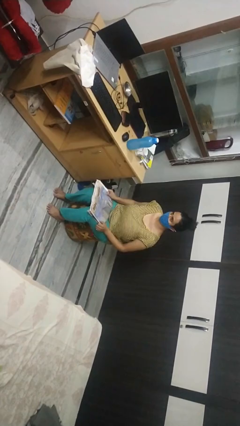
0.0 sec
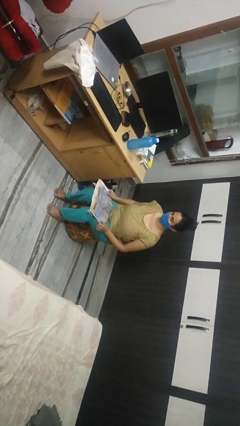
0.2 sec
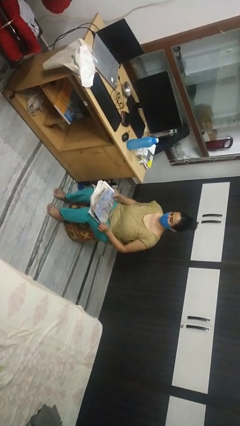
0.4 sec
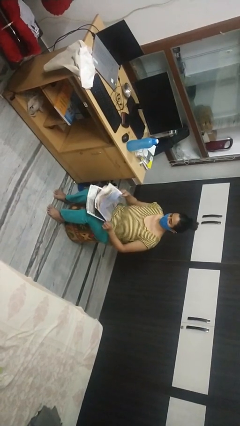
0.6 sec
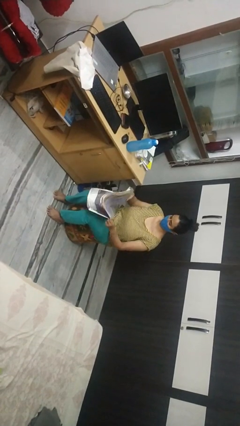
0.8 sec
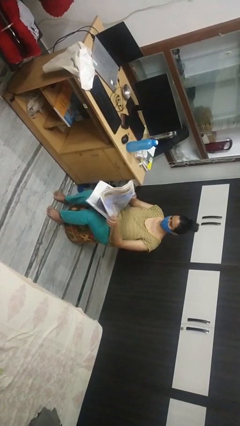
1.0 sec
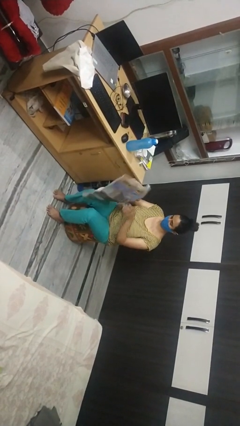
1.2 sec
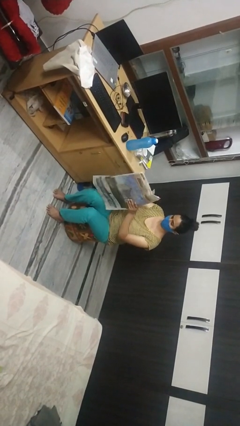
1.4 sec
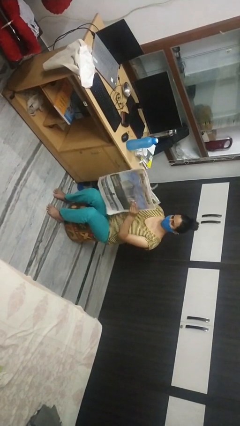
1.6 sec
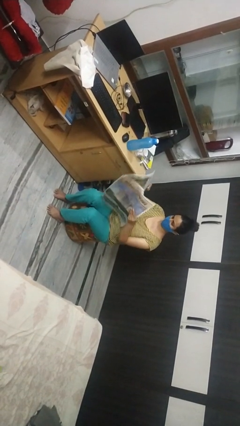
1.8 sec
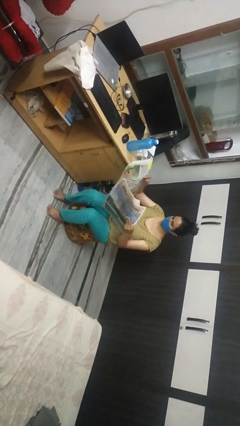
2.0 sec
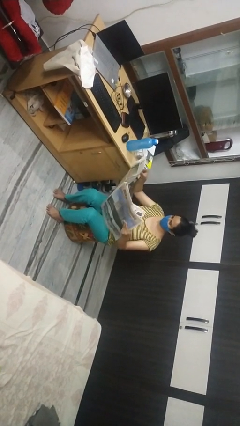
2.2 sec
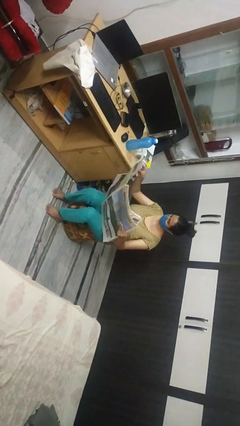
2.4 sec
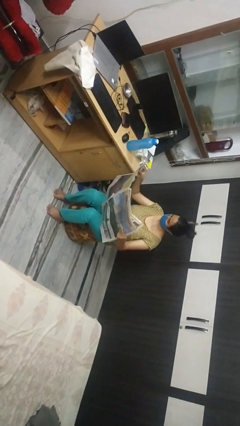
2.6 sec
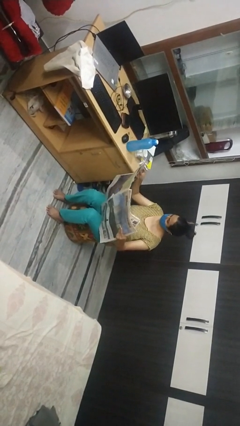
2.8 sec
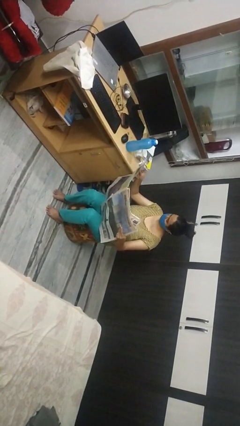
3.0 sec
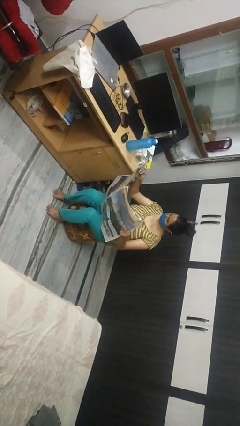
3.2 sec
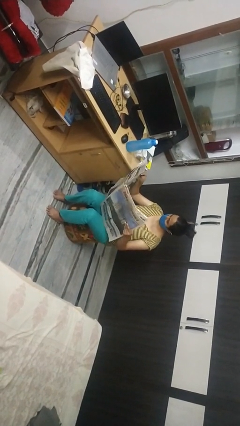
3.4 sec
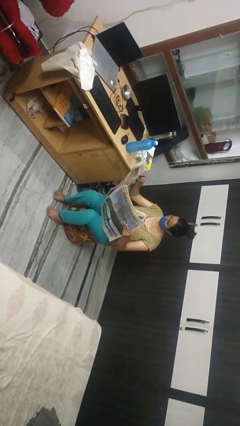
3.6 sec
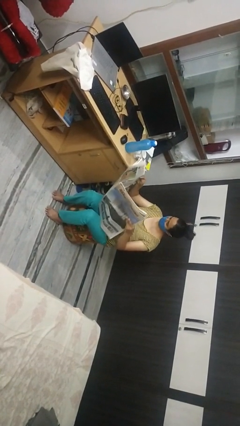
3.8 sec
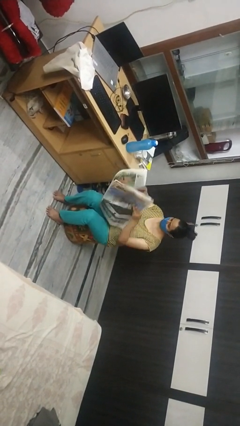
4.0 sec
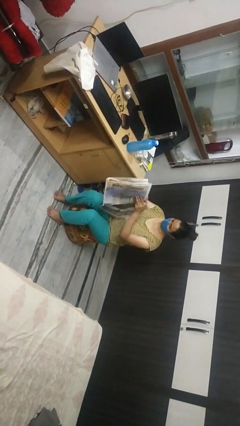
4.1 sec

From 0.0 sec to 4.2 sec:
person reads newspaper

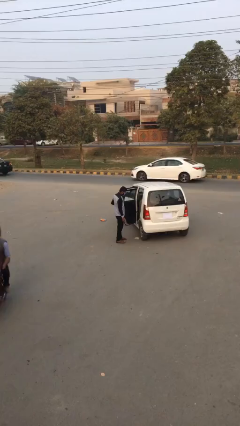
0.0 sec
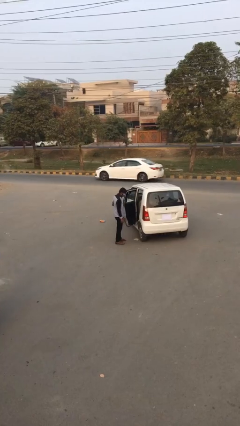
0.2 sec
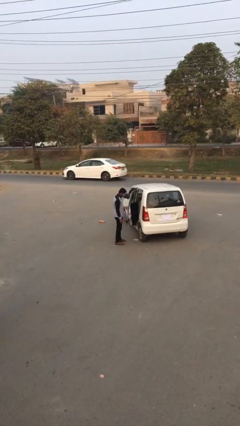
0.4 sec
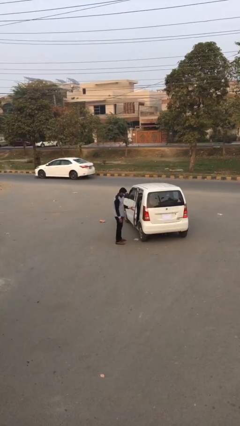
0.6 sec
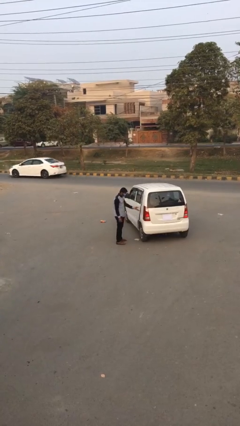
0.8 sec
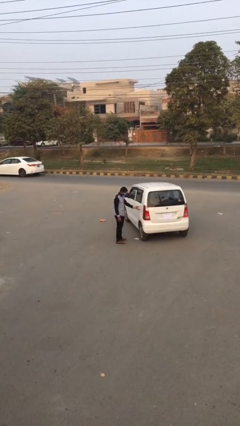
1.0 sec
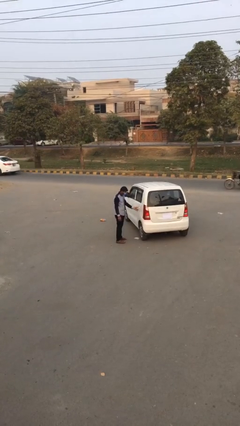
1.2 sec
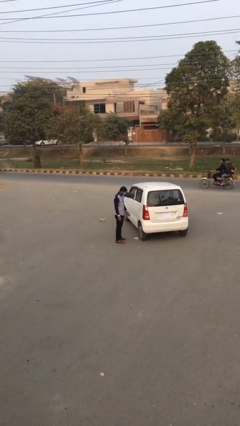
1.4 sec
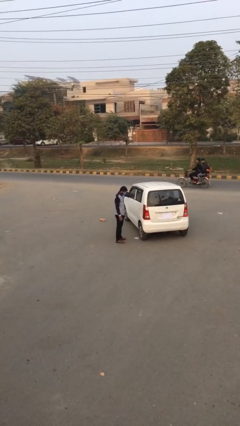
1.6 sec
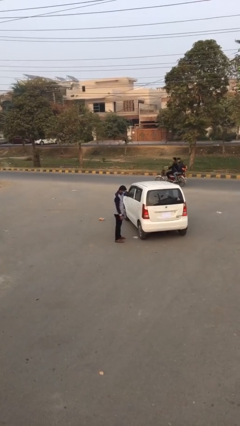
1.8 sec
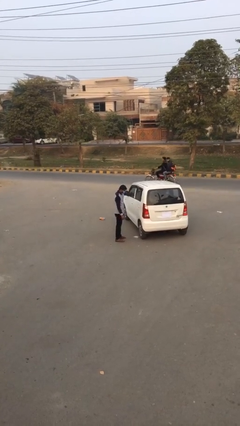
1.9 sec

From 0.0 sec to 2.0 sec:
person closes car door

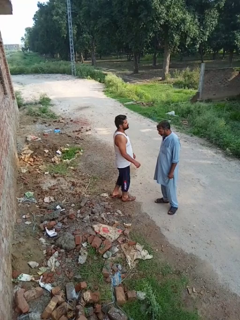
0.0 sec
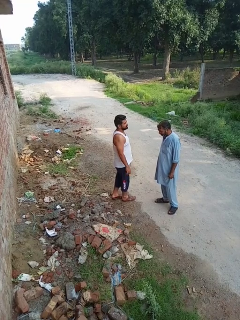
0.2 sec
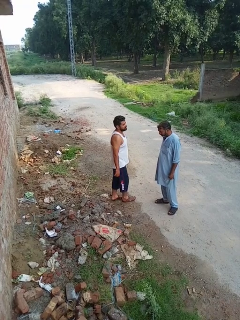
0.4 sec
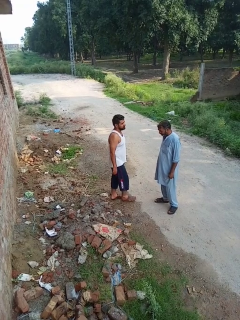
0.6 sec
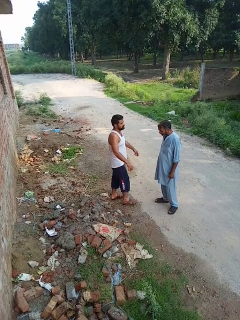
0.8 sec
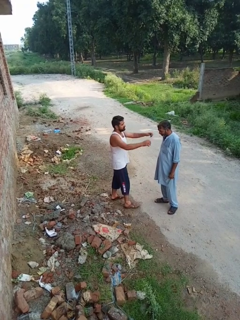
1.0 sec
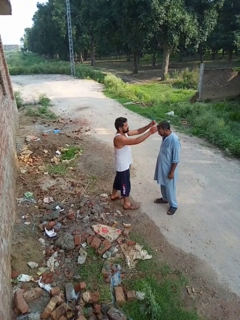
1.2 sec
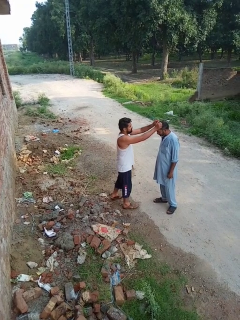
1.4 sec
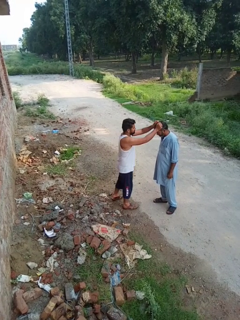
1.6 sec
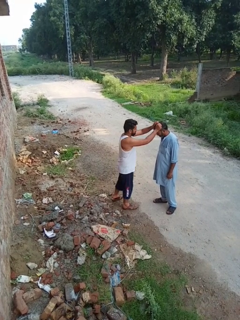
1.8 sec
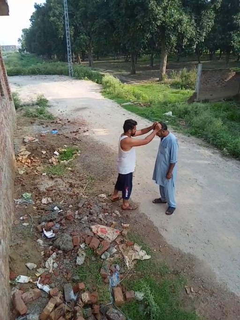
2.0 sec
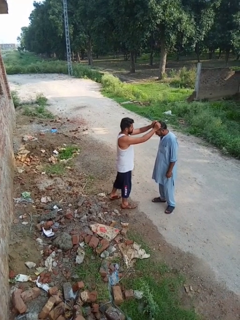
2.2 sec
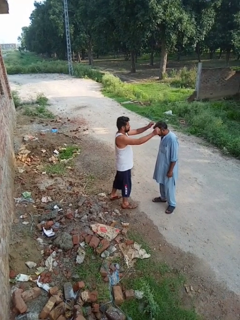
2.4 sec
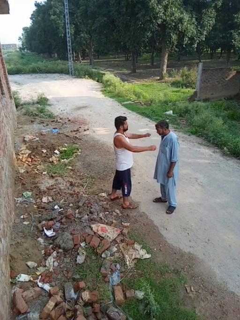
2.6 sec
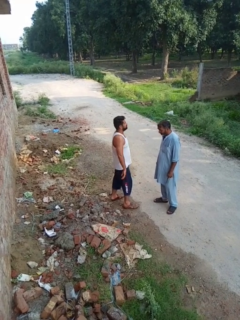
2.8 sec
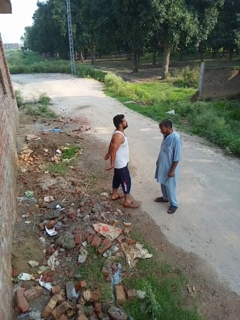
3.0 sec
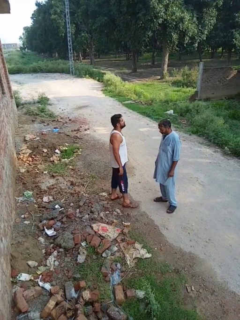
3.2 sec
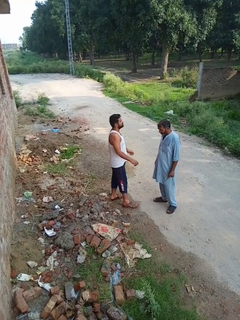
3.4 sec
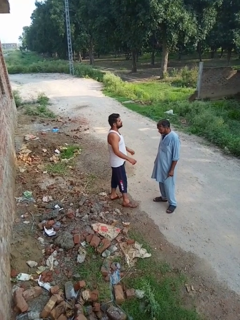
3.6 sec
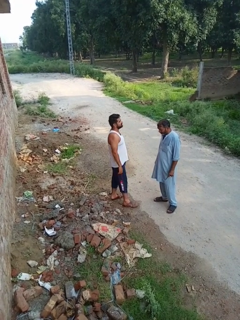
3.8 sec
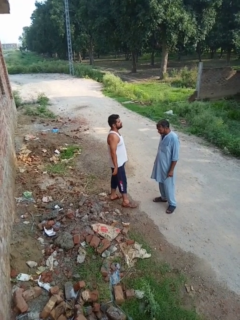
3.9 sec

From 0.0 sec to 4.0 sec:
person grabs person by hair

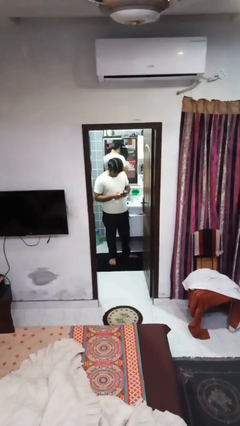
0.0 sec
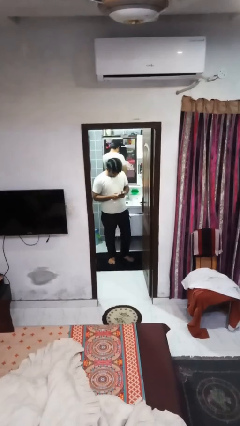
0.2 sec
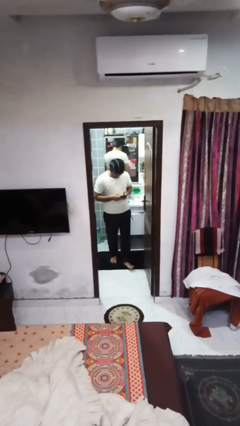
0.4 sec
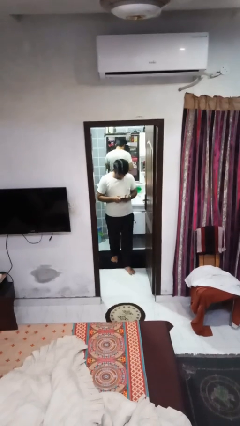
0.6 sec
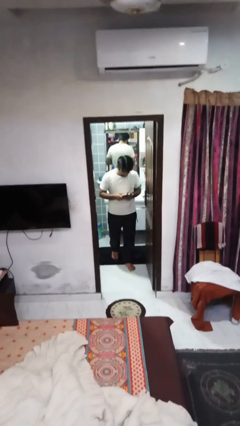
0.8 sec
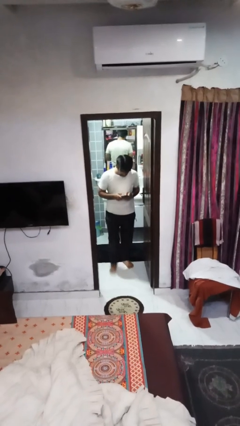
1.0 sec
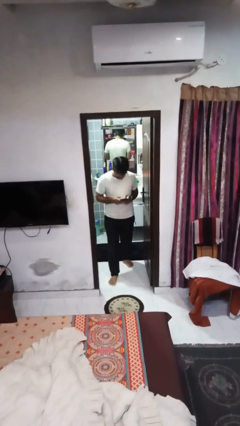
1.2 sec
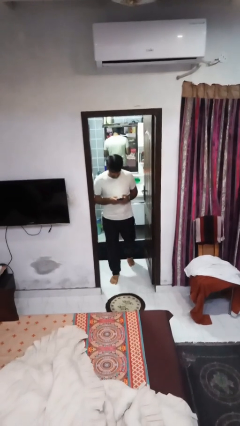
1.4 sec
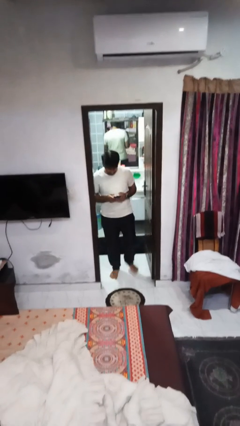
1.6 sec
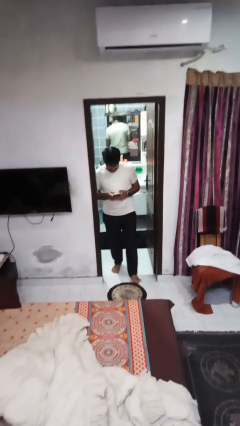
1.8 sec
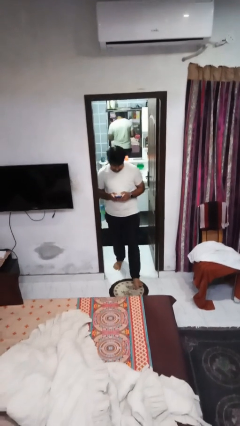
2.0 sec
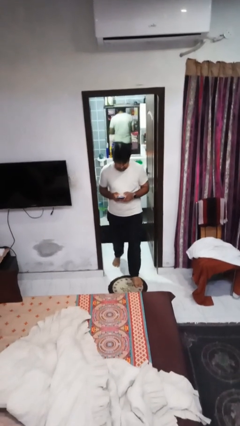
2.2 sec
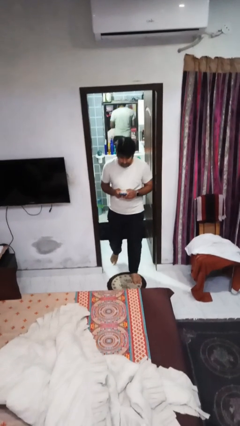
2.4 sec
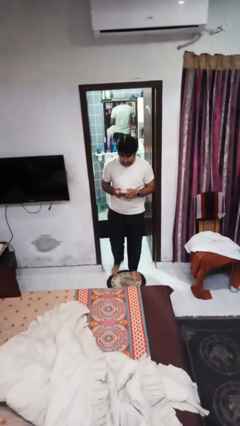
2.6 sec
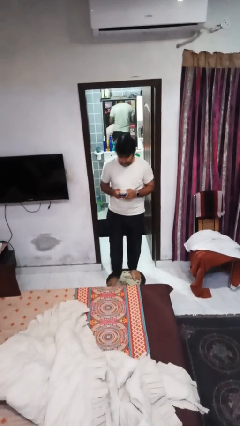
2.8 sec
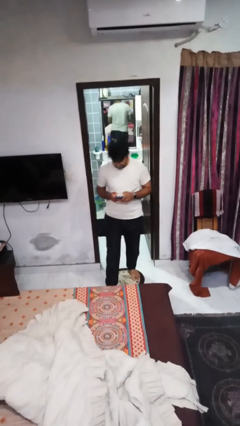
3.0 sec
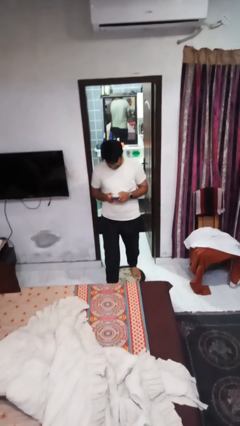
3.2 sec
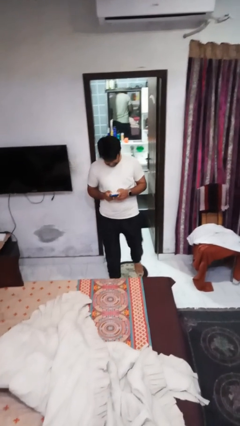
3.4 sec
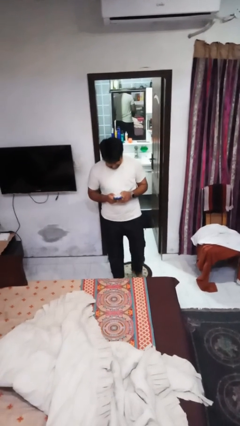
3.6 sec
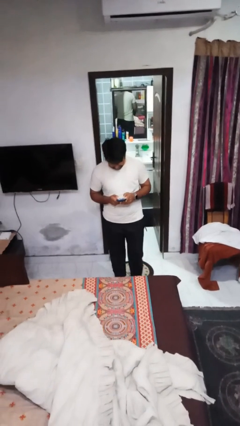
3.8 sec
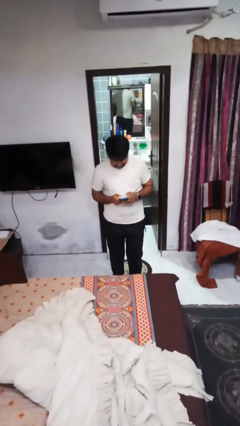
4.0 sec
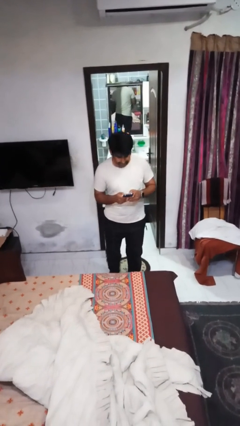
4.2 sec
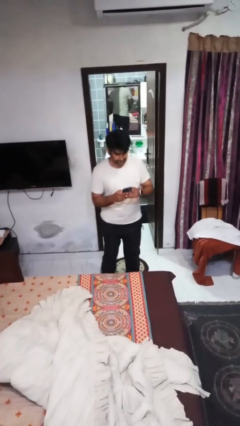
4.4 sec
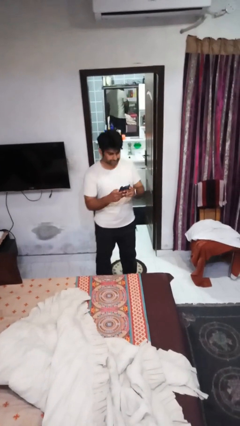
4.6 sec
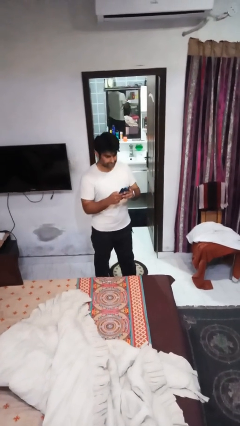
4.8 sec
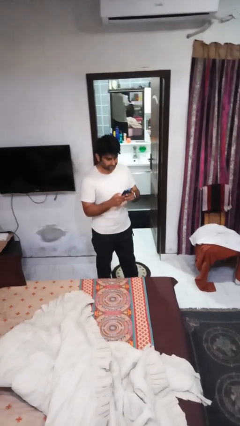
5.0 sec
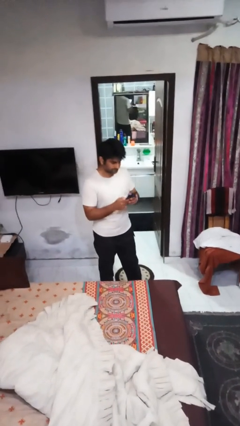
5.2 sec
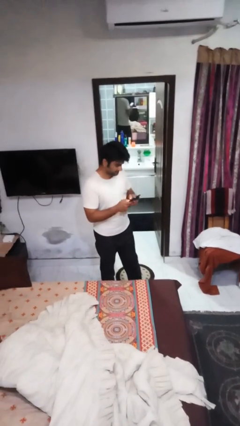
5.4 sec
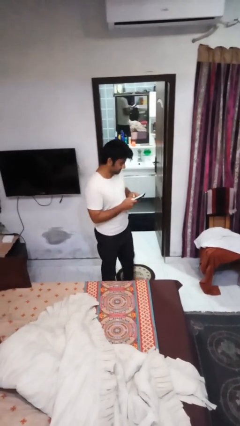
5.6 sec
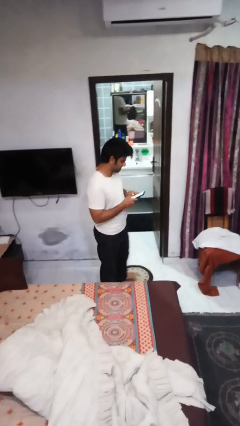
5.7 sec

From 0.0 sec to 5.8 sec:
person enters scene through structure

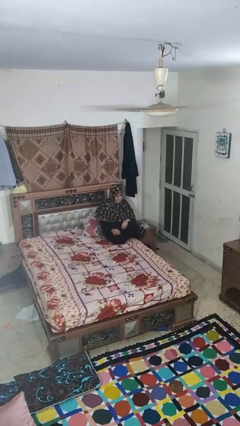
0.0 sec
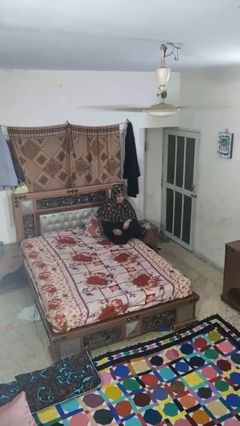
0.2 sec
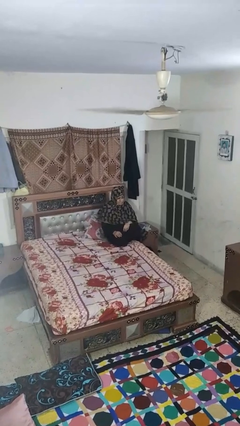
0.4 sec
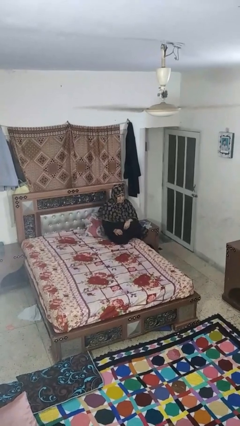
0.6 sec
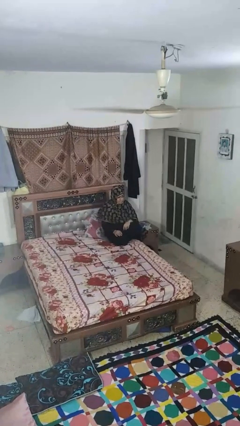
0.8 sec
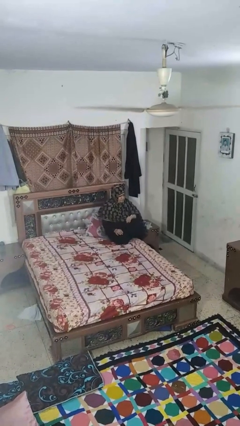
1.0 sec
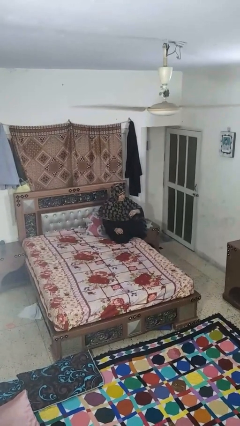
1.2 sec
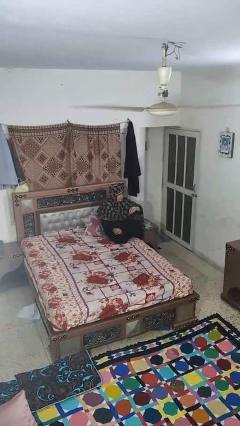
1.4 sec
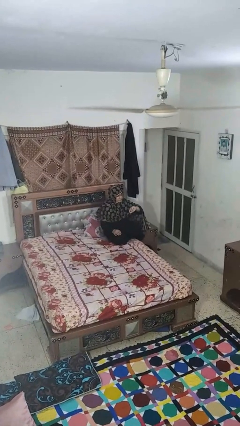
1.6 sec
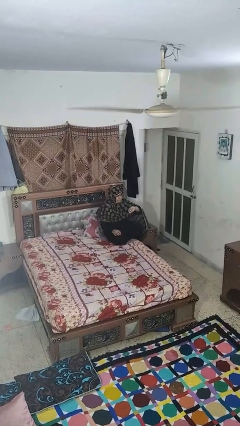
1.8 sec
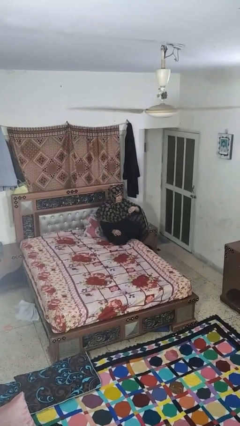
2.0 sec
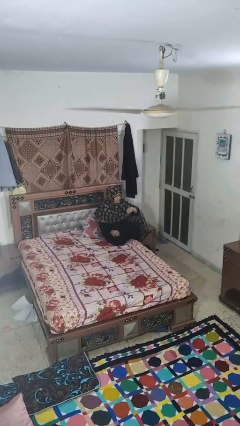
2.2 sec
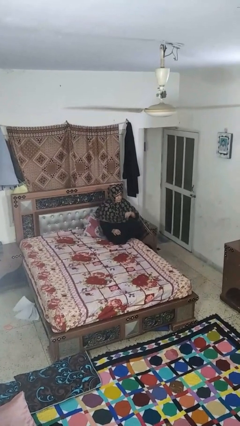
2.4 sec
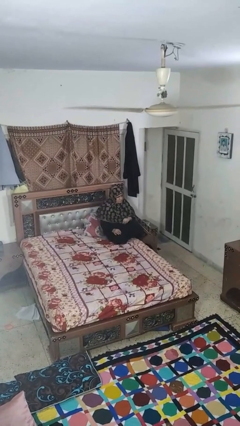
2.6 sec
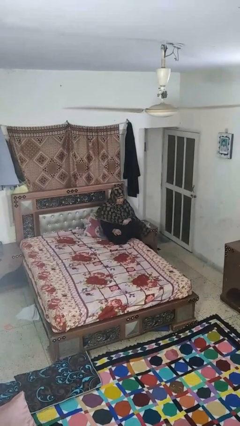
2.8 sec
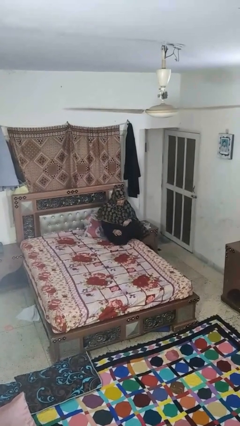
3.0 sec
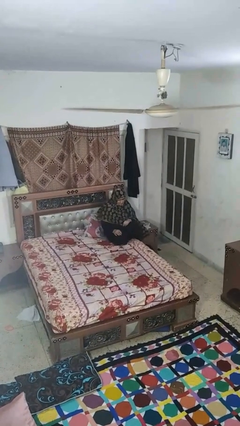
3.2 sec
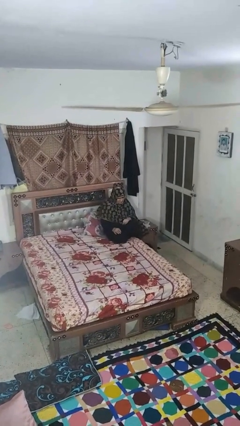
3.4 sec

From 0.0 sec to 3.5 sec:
person looks at wristwatch
